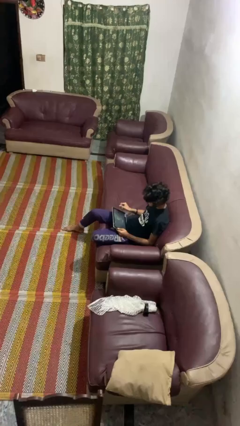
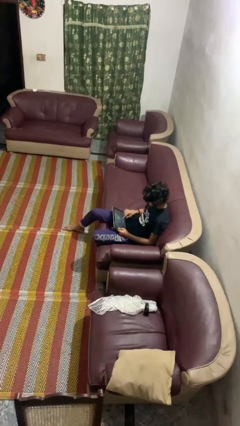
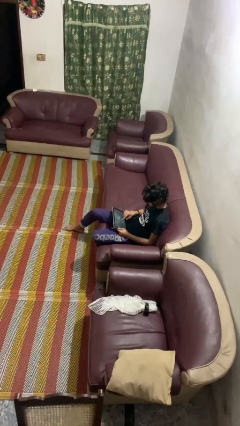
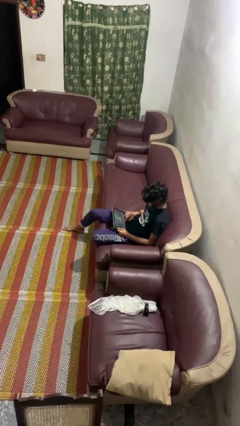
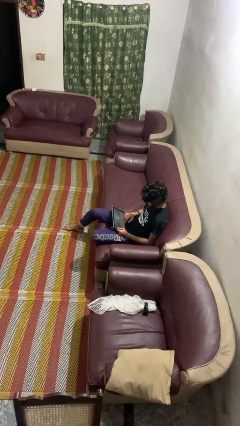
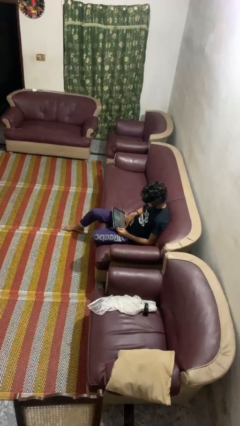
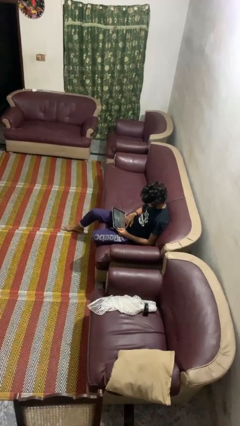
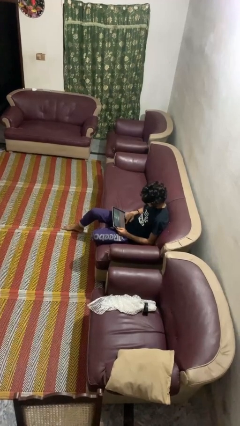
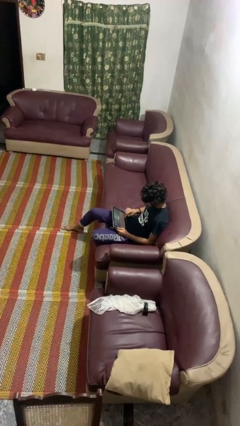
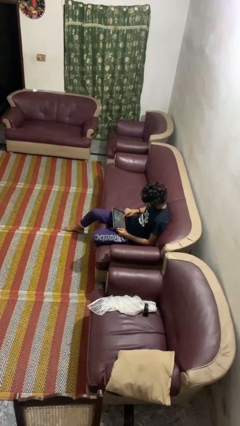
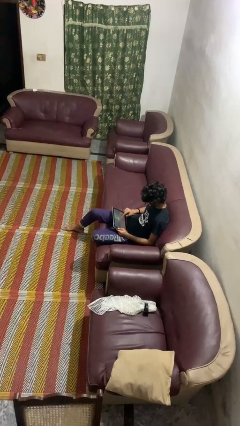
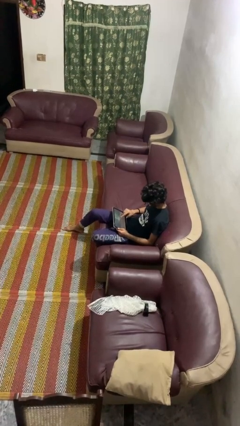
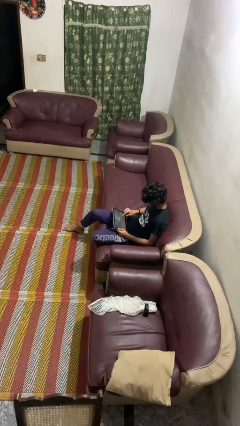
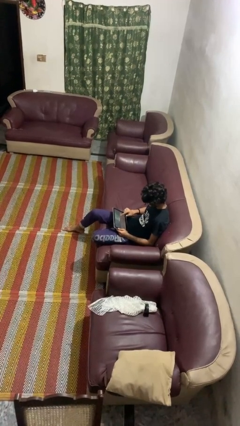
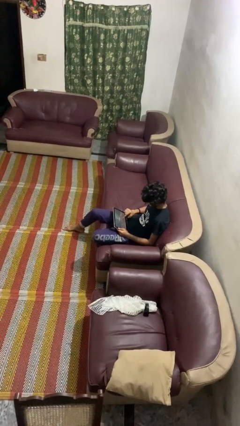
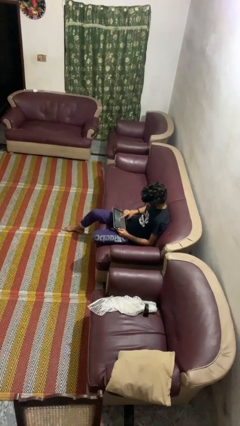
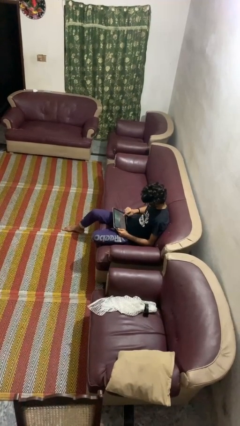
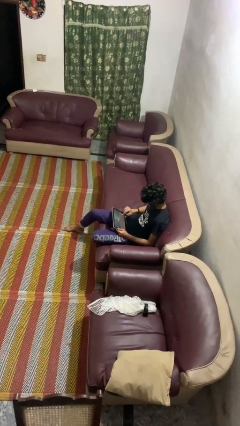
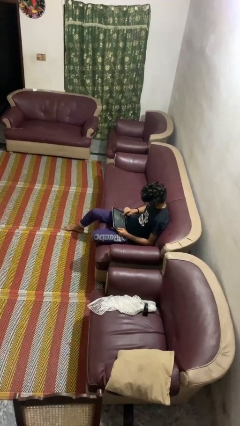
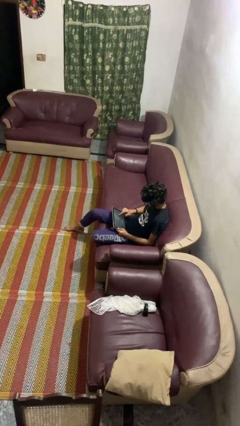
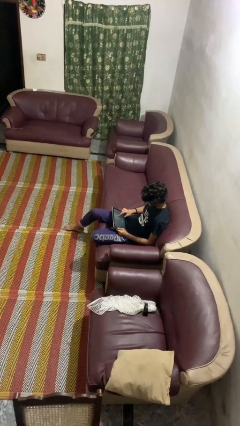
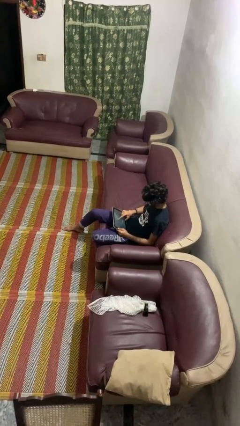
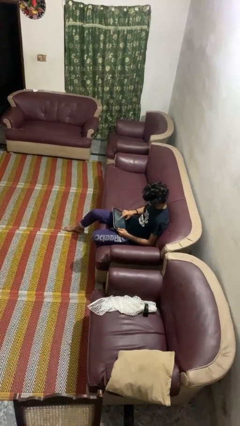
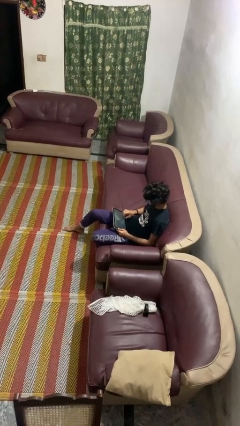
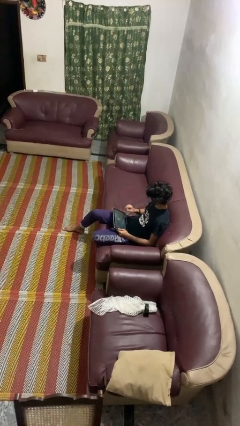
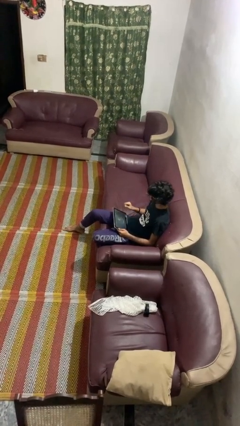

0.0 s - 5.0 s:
person interacts with tablet

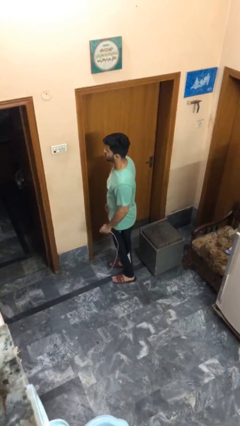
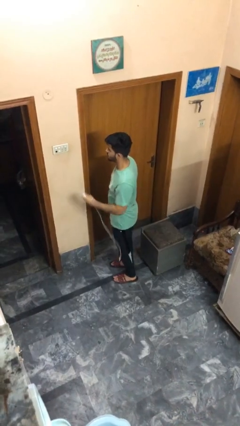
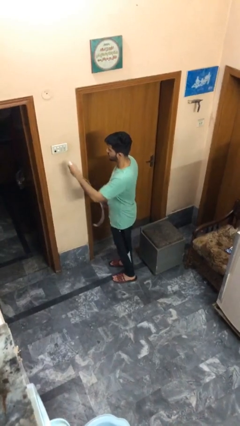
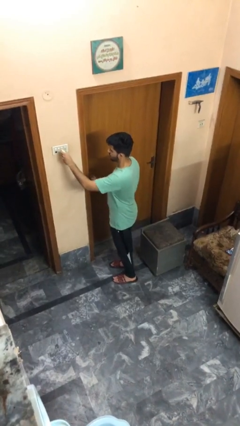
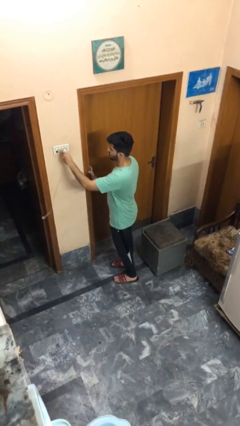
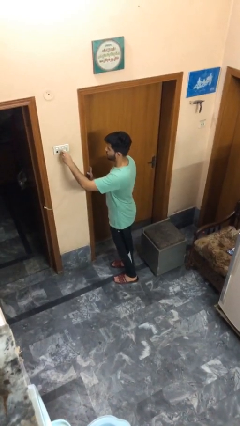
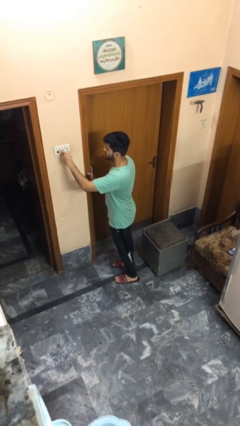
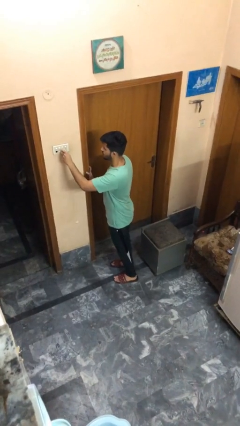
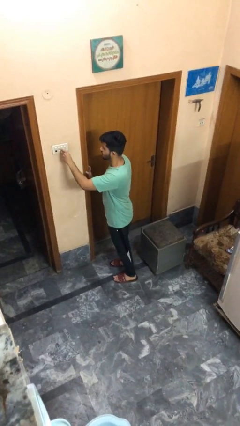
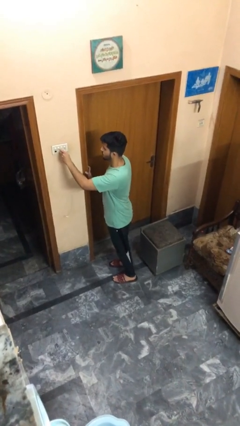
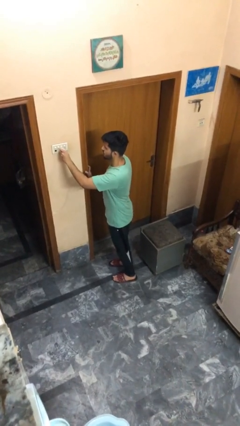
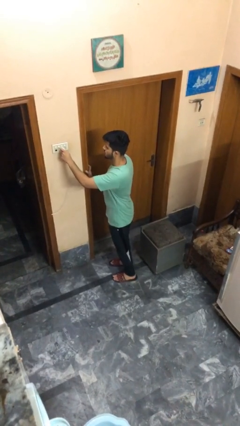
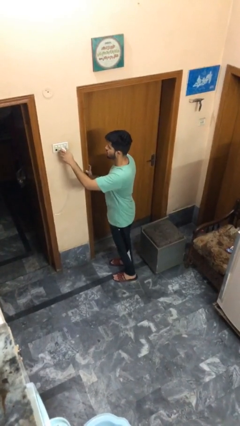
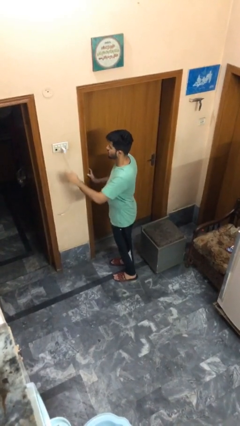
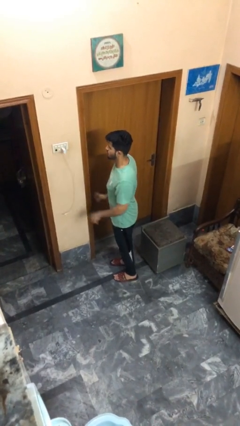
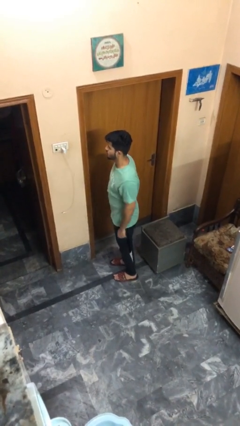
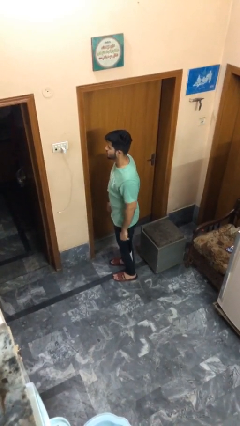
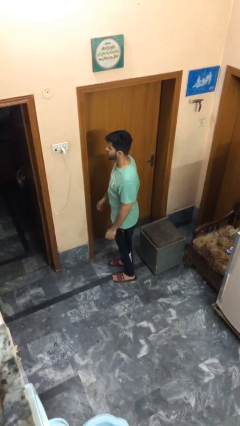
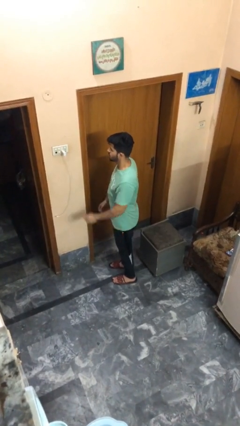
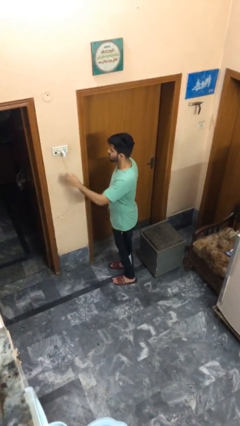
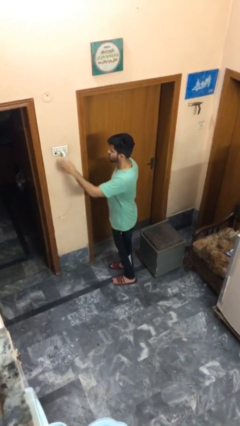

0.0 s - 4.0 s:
person plugs into electrical socket

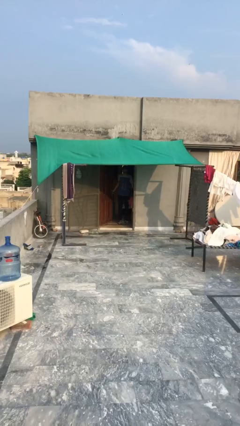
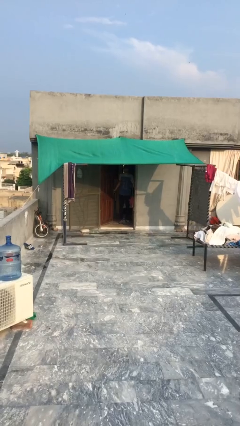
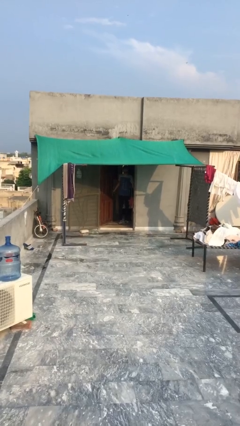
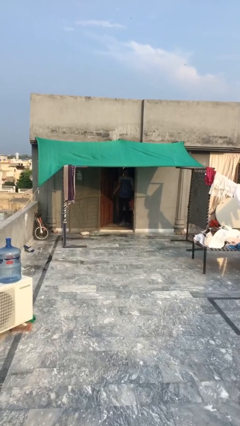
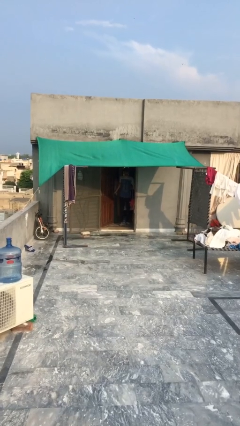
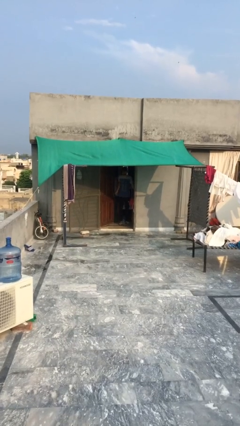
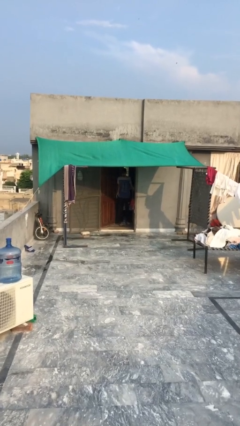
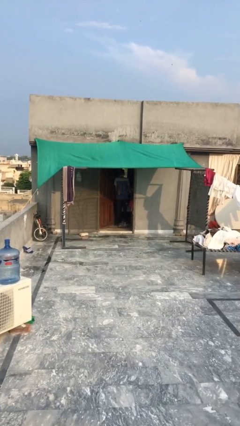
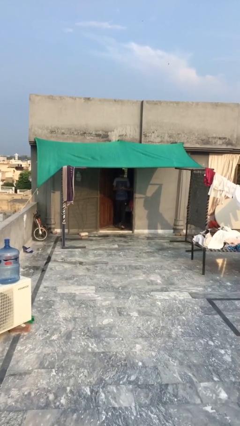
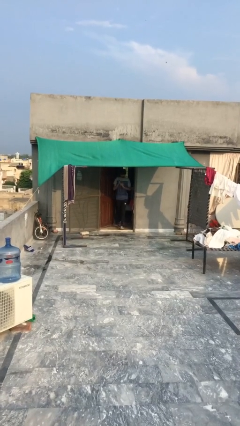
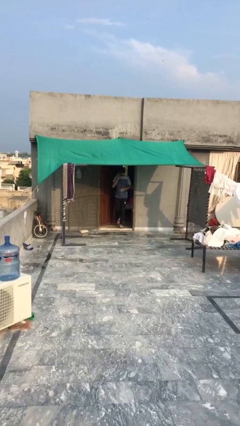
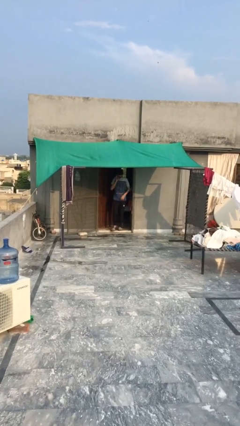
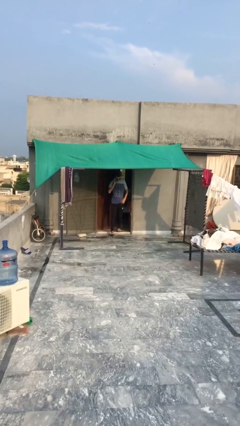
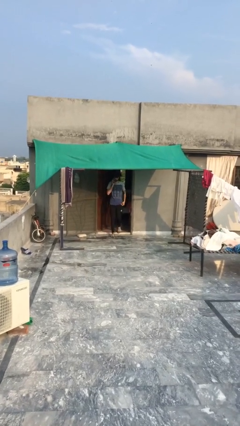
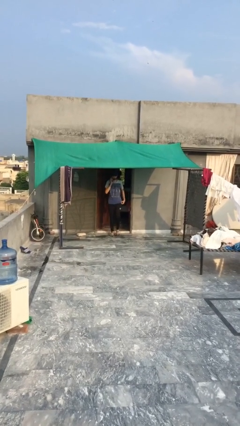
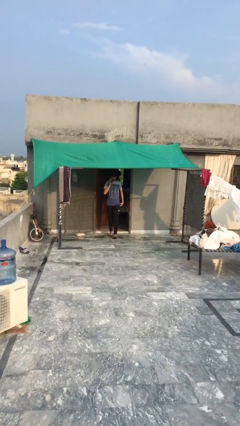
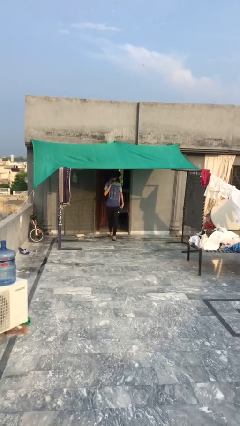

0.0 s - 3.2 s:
person enters scene through structure

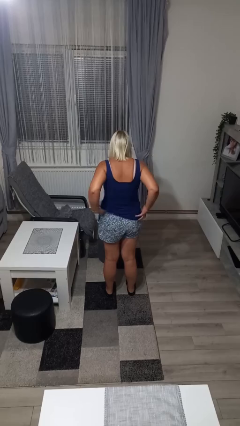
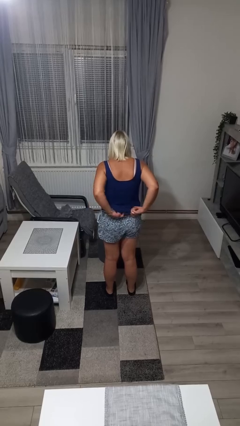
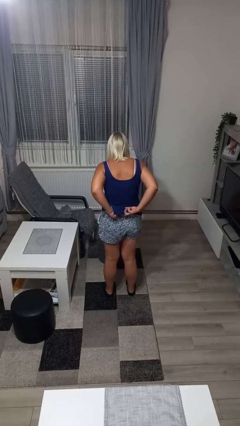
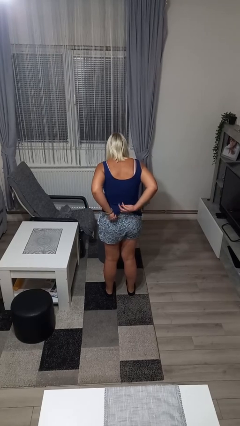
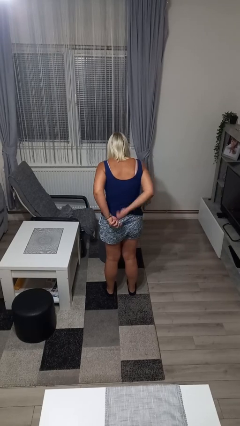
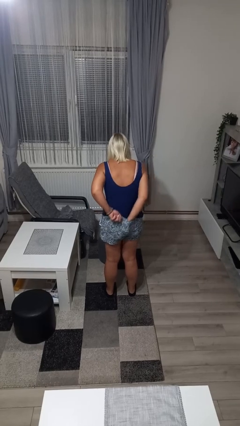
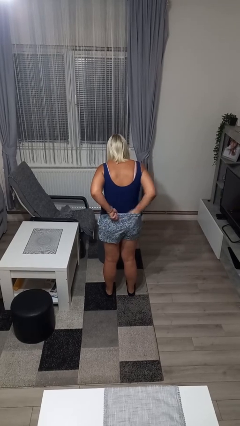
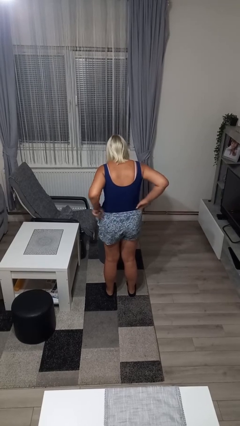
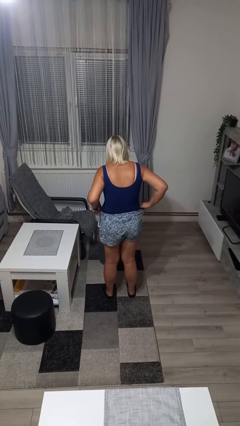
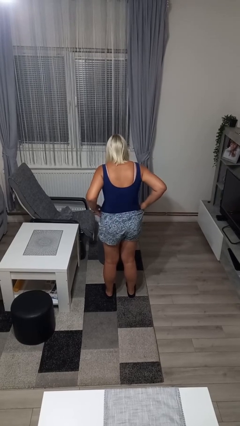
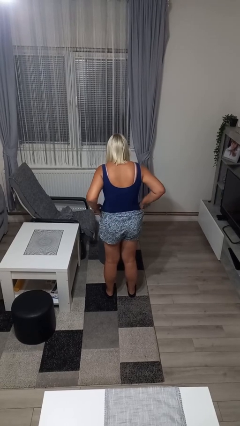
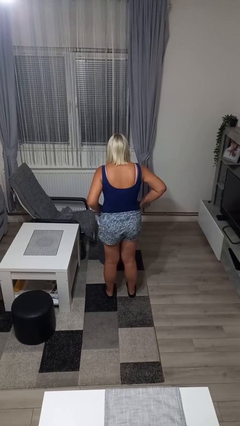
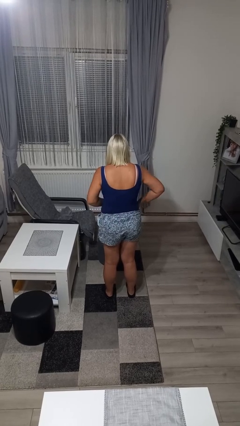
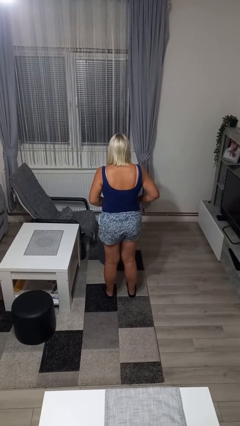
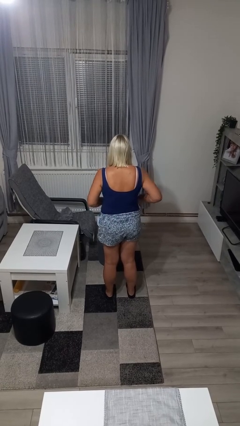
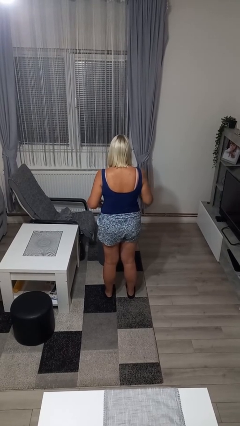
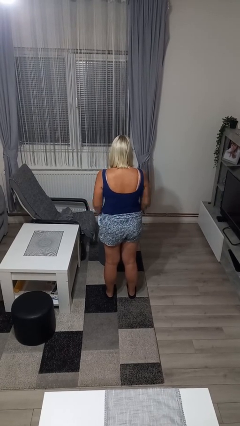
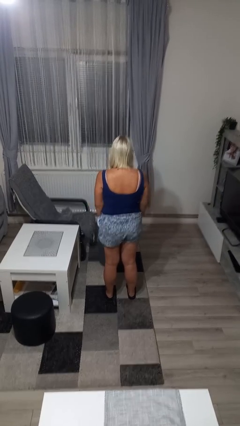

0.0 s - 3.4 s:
person tucks in shirt

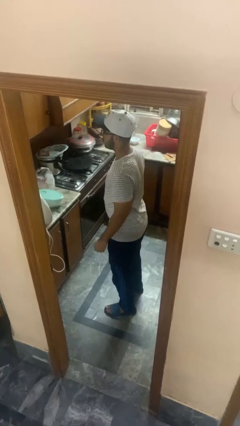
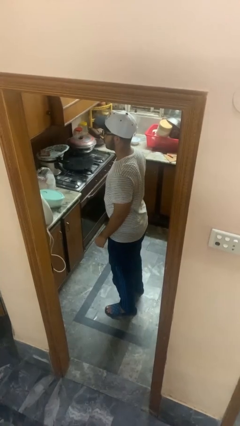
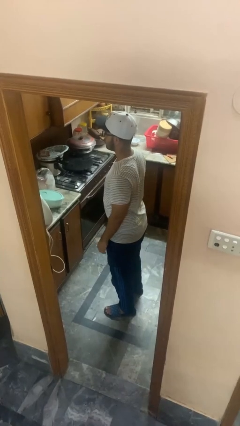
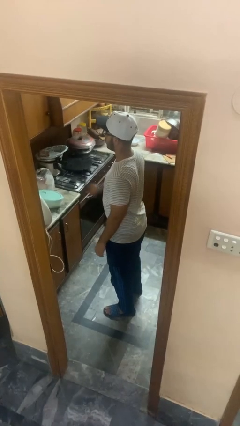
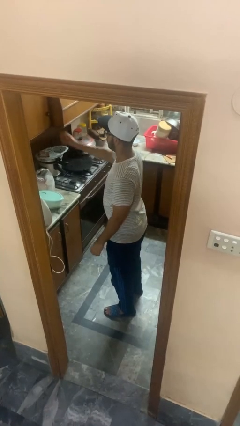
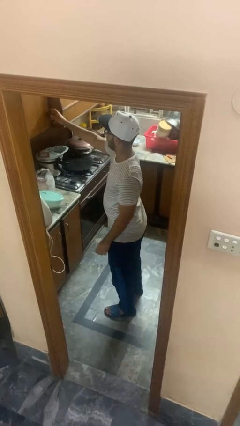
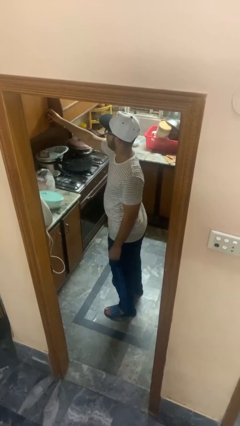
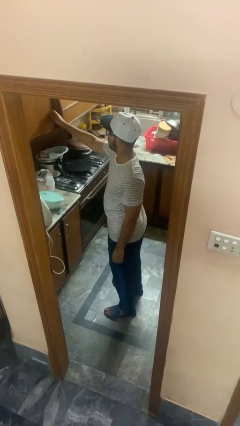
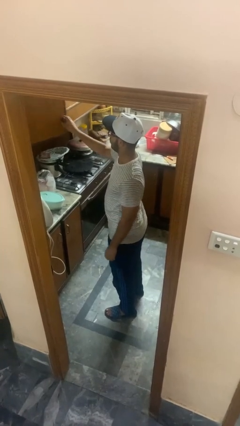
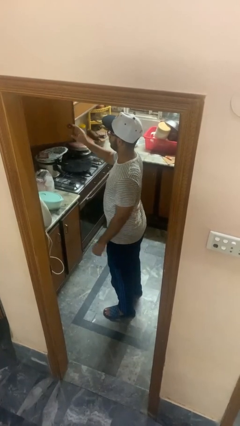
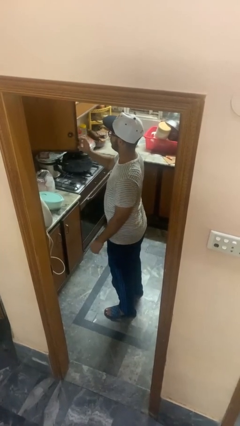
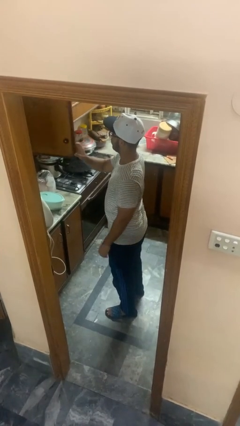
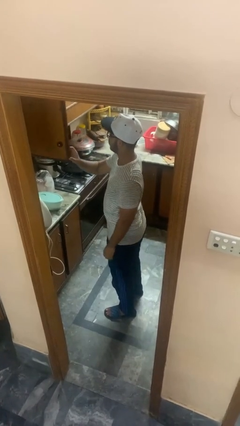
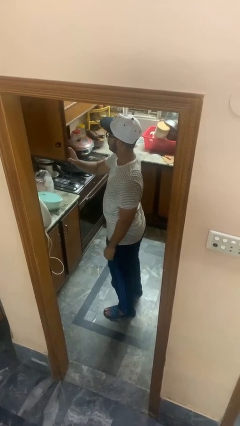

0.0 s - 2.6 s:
person opens kitchen drawer
